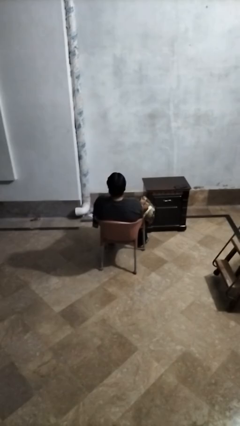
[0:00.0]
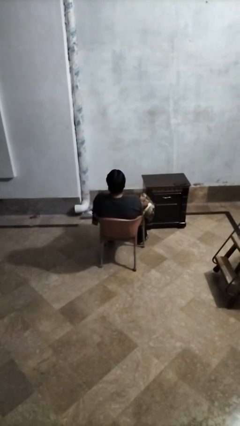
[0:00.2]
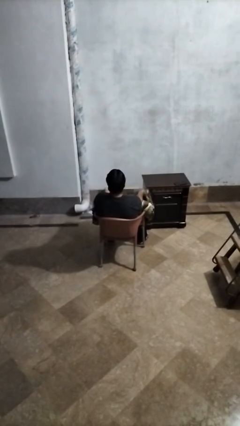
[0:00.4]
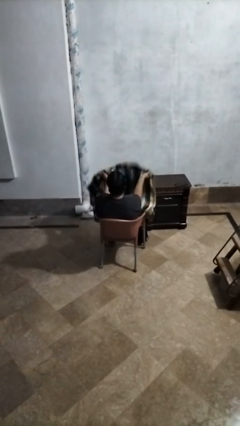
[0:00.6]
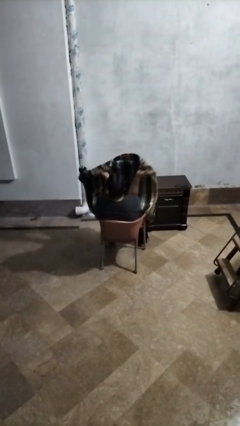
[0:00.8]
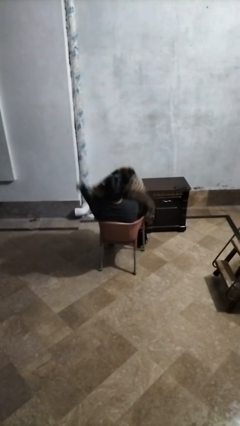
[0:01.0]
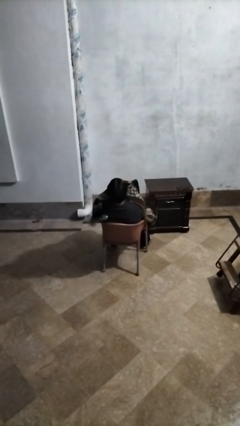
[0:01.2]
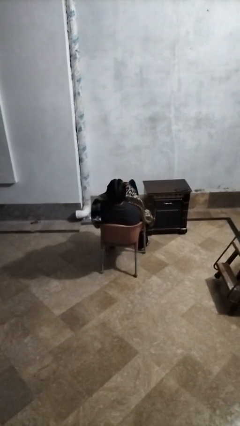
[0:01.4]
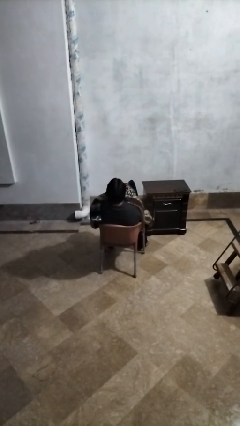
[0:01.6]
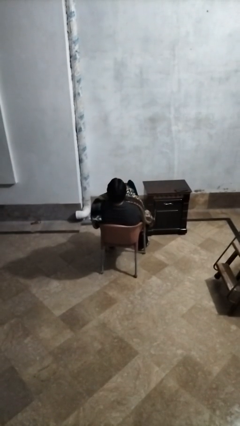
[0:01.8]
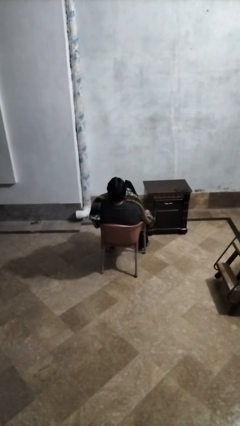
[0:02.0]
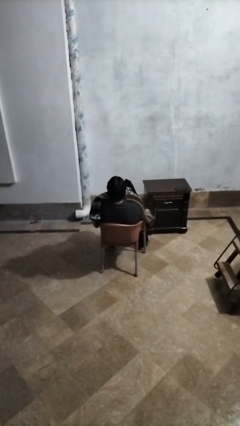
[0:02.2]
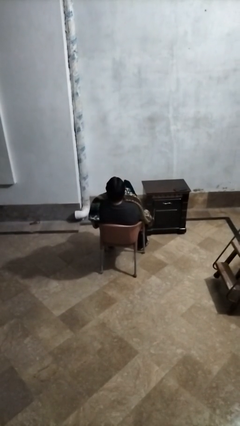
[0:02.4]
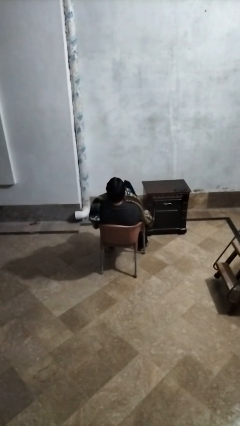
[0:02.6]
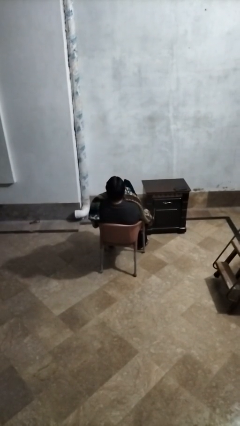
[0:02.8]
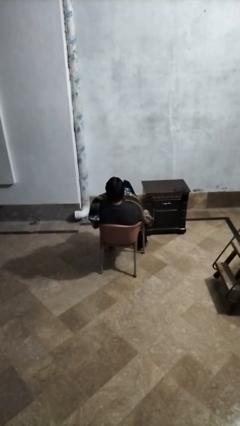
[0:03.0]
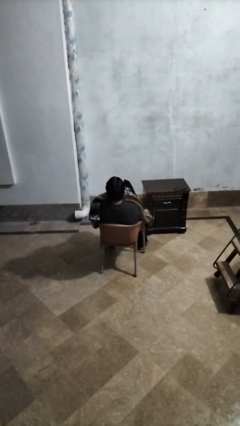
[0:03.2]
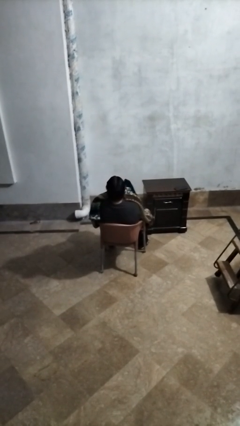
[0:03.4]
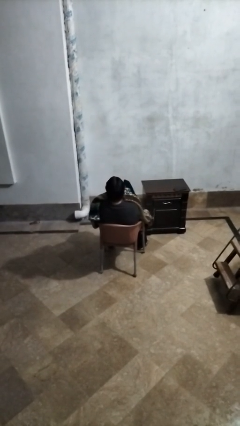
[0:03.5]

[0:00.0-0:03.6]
person covers with blanket

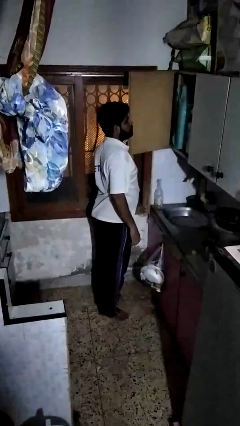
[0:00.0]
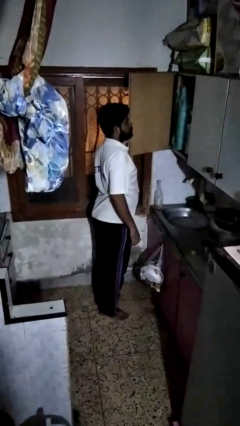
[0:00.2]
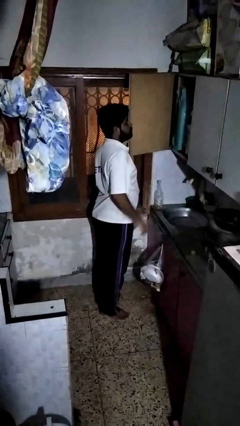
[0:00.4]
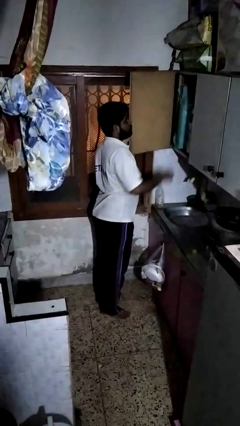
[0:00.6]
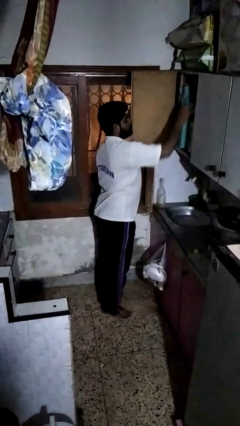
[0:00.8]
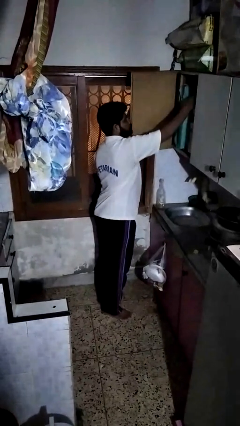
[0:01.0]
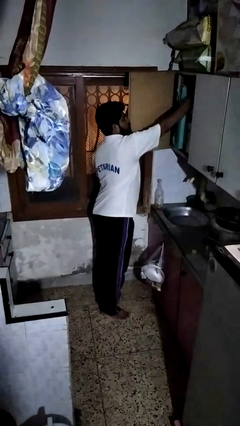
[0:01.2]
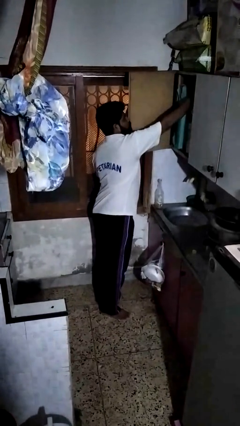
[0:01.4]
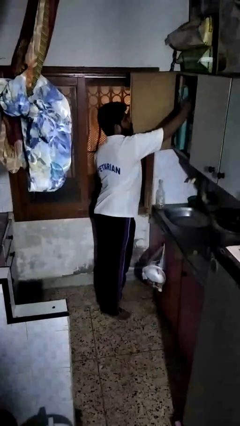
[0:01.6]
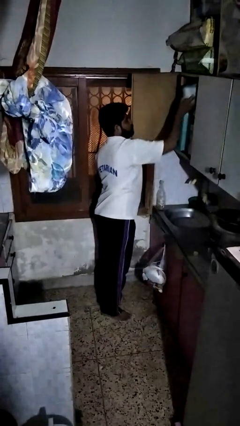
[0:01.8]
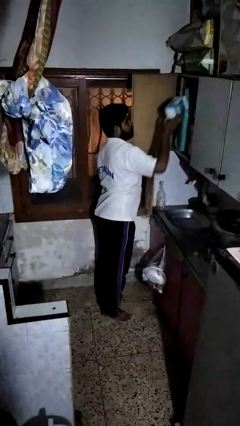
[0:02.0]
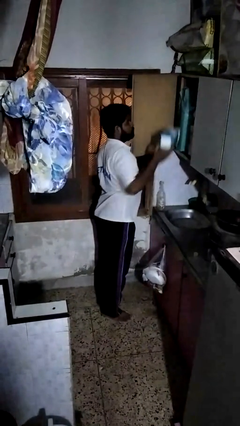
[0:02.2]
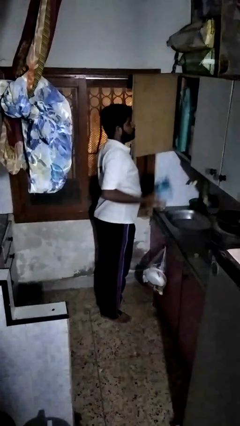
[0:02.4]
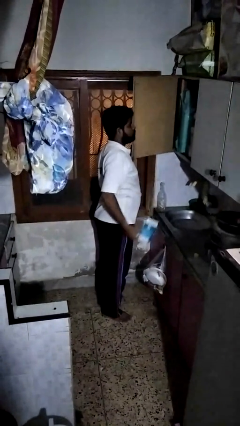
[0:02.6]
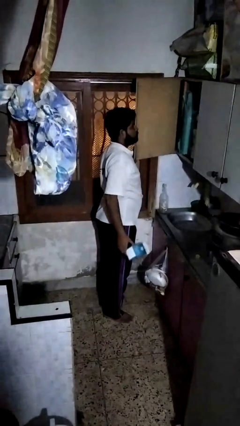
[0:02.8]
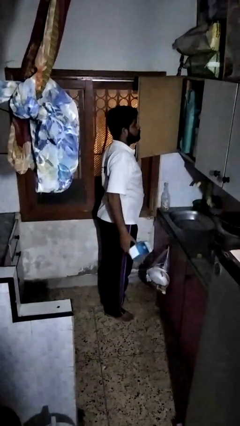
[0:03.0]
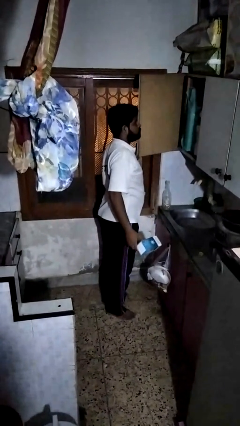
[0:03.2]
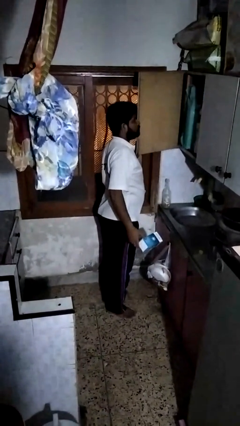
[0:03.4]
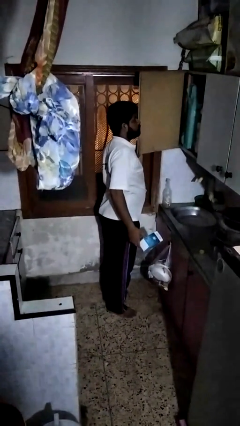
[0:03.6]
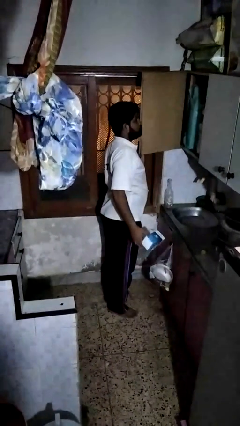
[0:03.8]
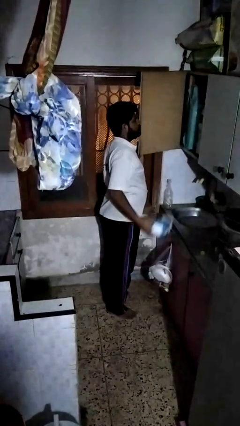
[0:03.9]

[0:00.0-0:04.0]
person picks up object from cabinet

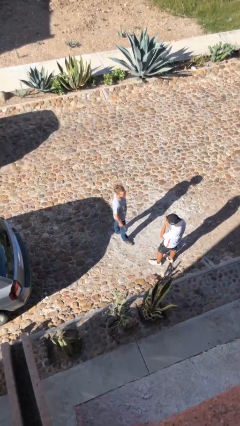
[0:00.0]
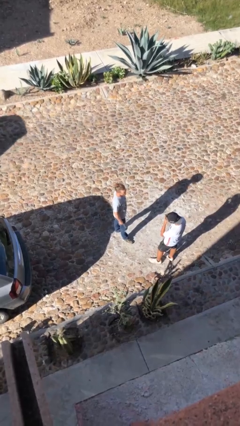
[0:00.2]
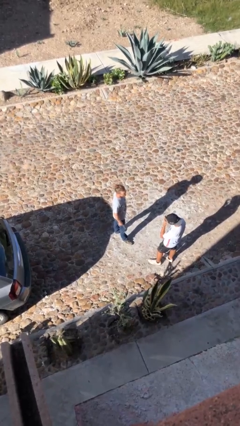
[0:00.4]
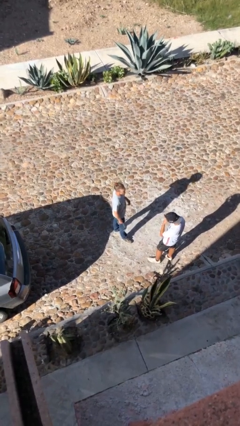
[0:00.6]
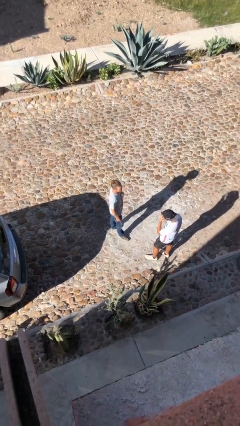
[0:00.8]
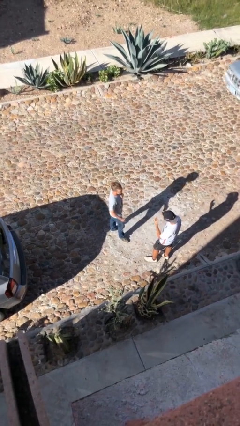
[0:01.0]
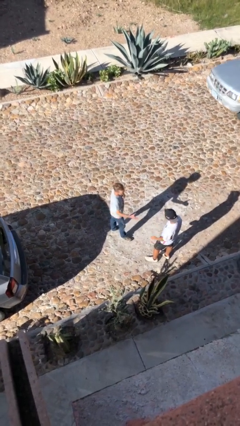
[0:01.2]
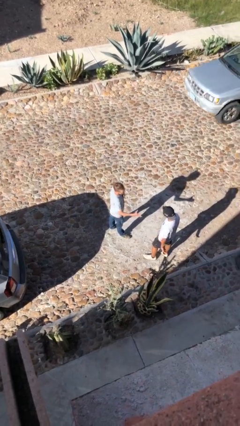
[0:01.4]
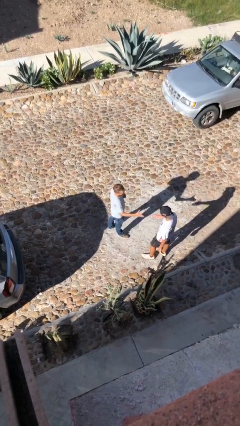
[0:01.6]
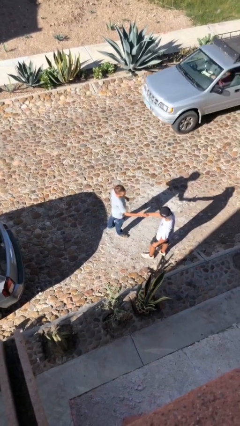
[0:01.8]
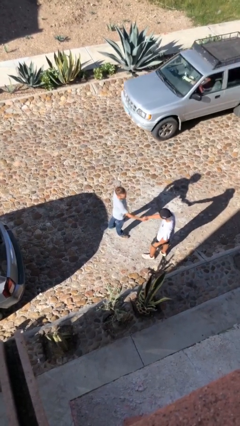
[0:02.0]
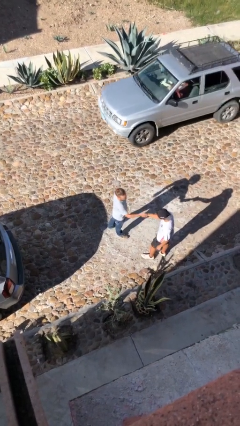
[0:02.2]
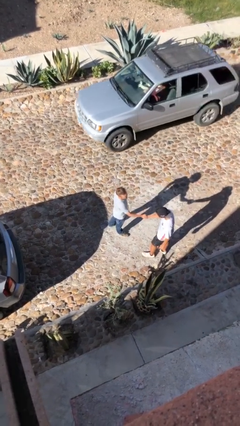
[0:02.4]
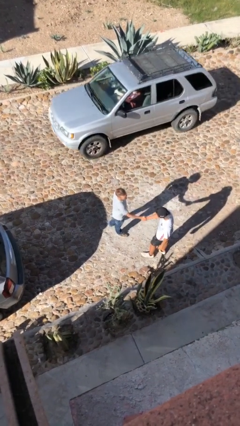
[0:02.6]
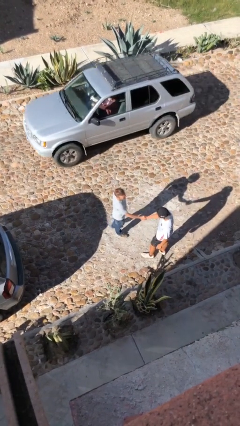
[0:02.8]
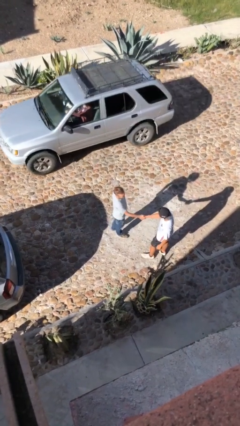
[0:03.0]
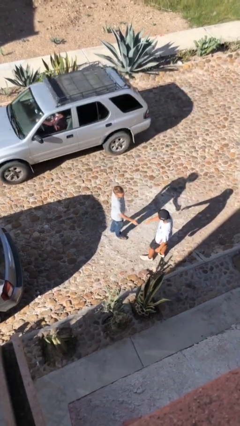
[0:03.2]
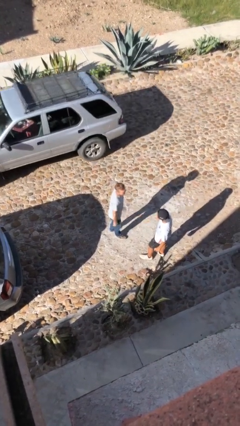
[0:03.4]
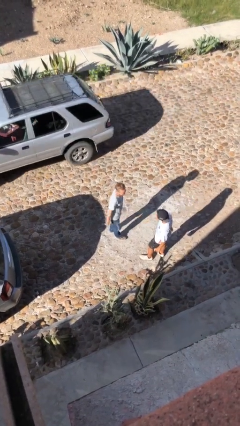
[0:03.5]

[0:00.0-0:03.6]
person shakes hand

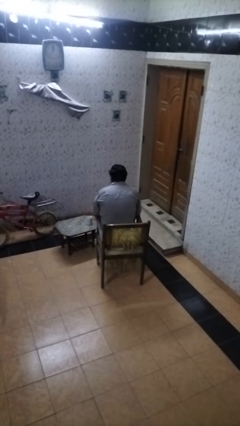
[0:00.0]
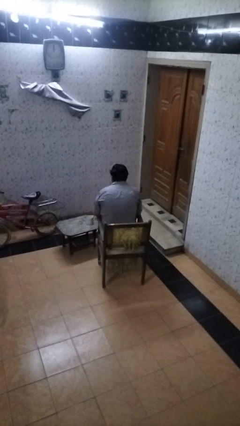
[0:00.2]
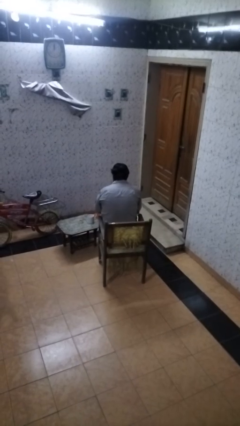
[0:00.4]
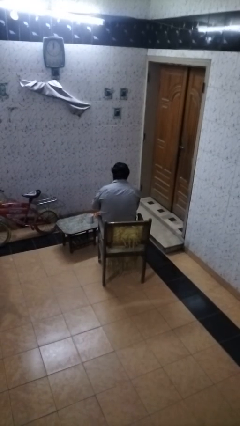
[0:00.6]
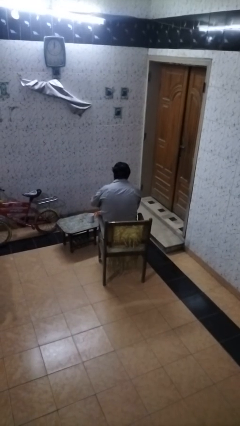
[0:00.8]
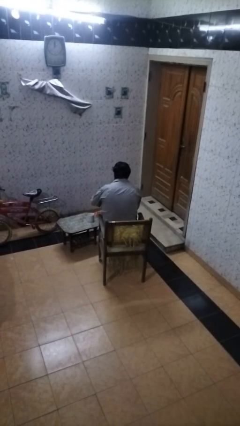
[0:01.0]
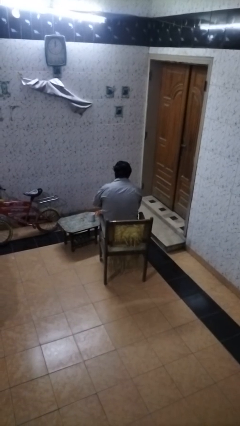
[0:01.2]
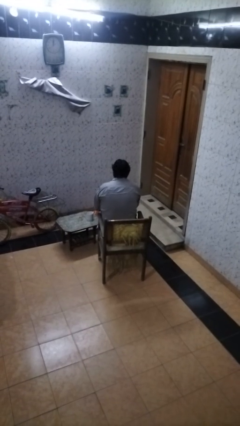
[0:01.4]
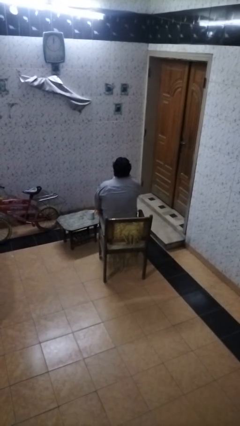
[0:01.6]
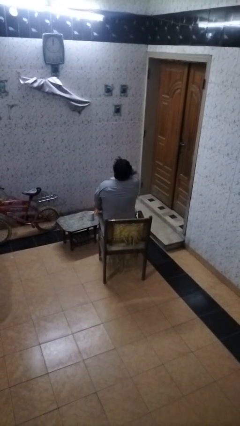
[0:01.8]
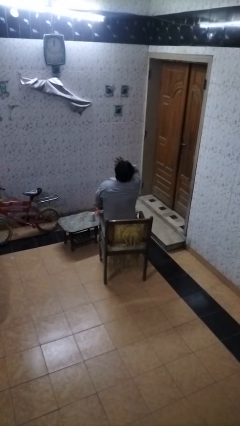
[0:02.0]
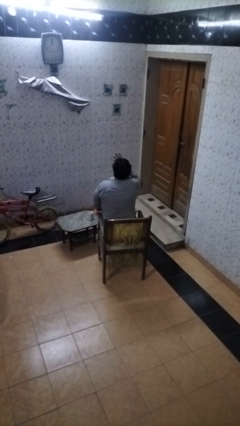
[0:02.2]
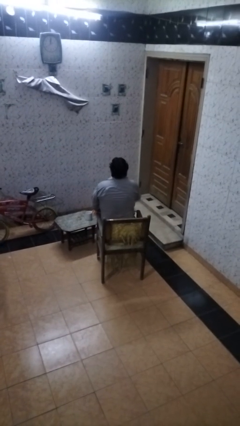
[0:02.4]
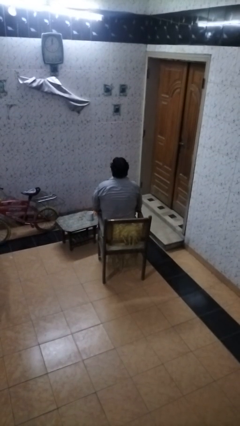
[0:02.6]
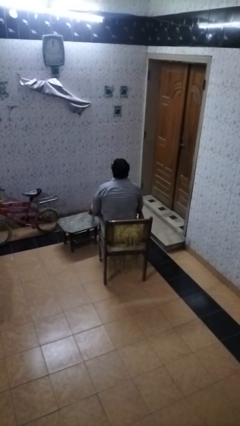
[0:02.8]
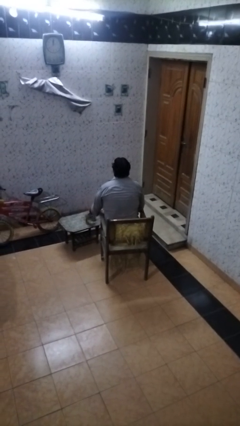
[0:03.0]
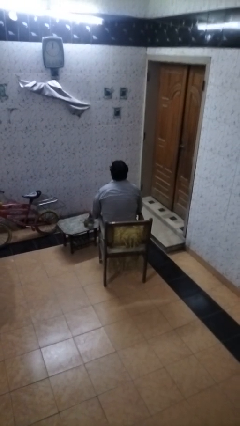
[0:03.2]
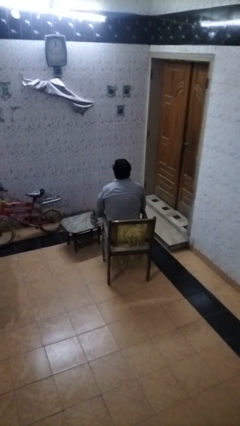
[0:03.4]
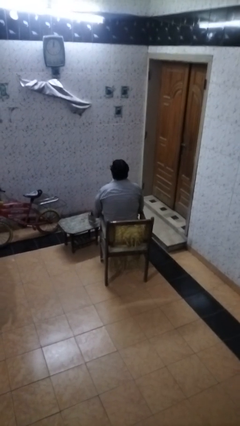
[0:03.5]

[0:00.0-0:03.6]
person takes medicine pills

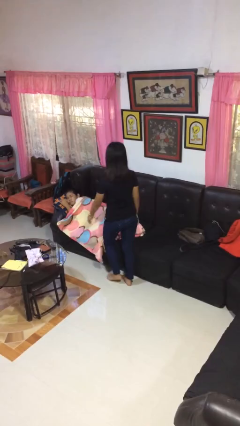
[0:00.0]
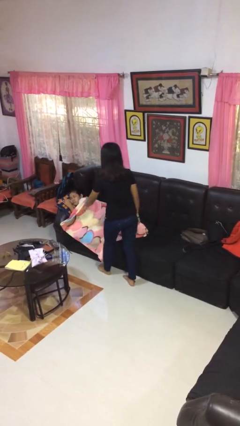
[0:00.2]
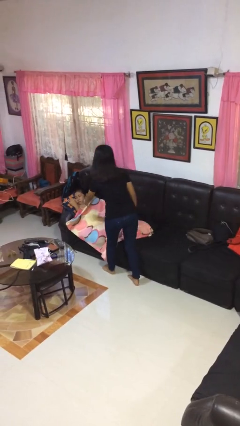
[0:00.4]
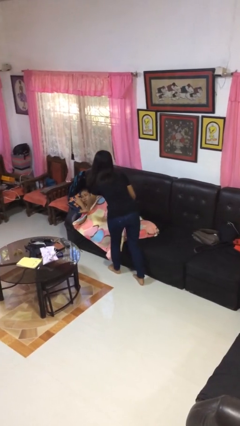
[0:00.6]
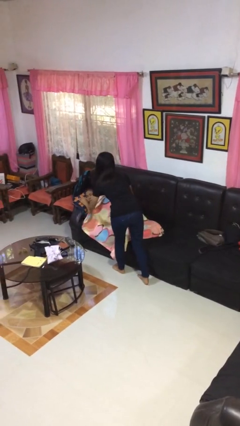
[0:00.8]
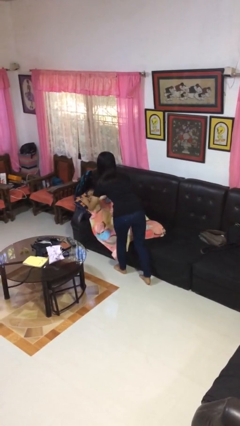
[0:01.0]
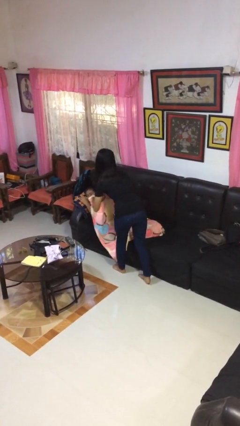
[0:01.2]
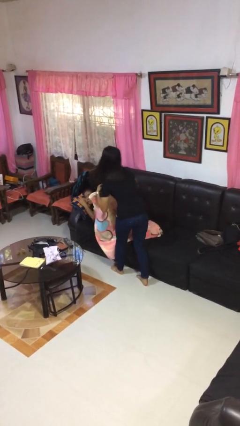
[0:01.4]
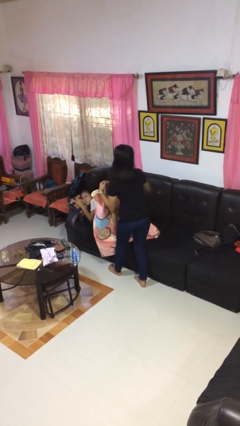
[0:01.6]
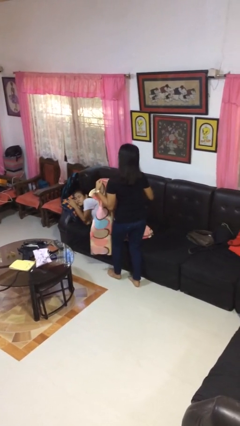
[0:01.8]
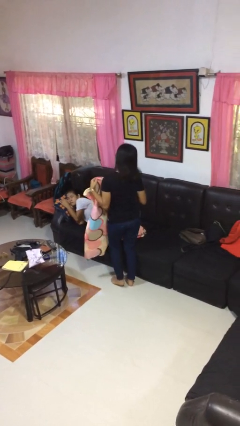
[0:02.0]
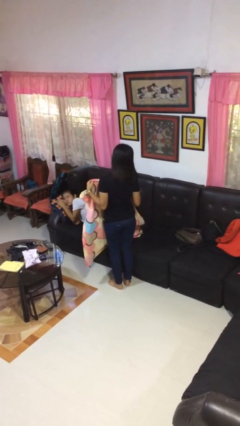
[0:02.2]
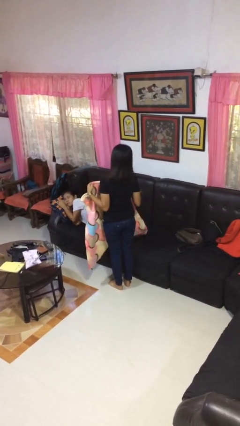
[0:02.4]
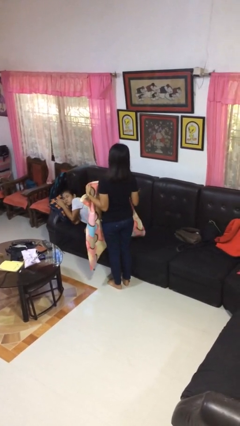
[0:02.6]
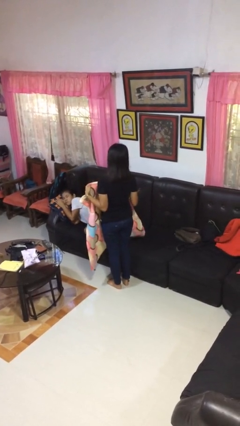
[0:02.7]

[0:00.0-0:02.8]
person uncovers friend with blanket

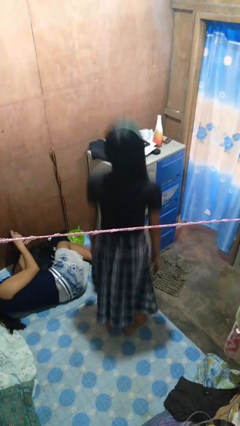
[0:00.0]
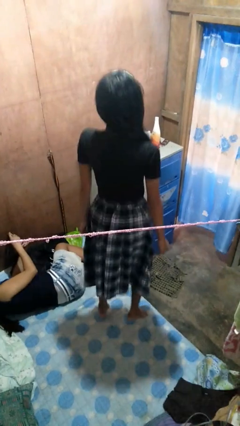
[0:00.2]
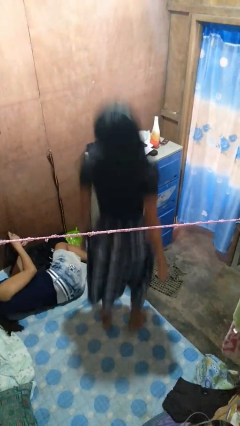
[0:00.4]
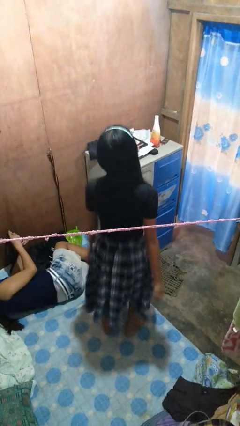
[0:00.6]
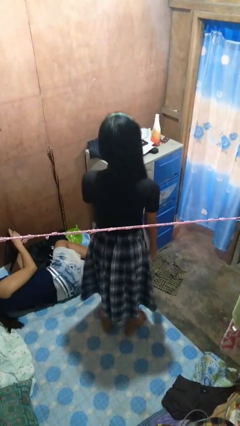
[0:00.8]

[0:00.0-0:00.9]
person jumps on bed
